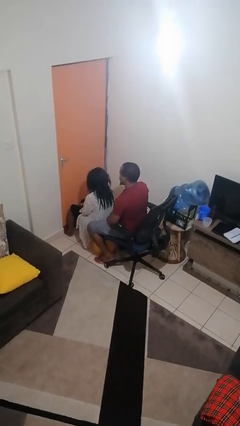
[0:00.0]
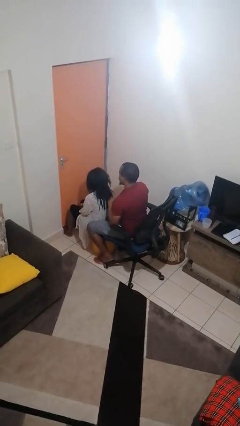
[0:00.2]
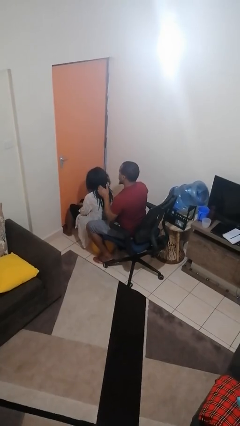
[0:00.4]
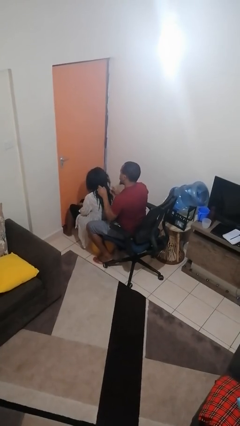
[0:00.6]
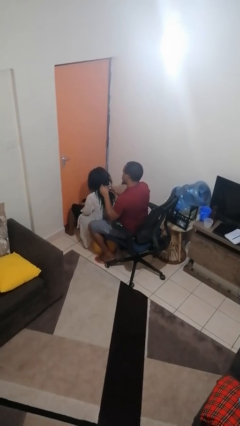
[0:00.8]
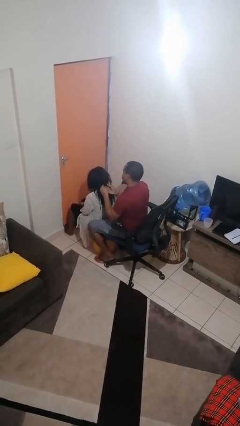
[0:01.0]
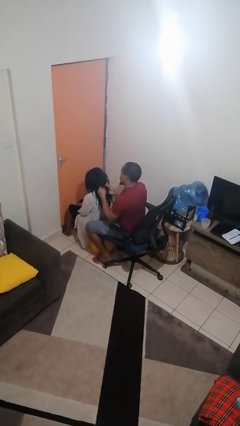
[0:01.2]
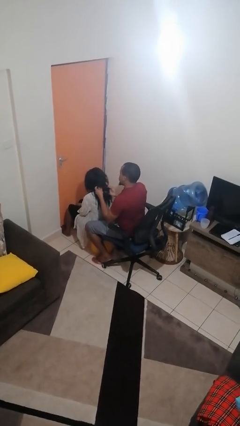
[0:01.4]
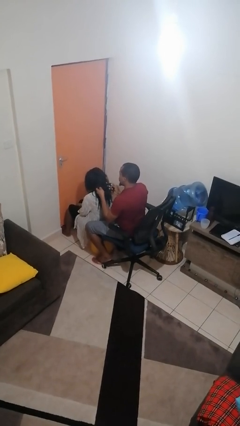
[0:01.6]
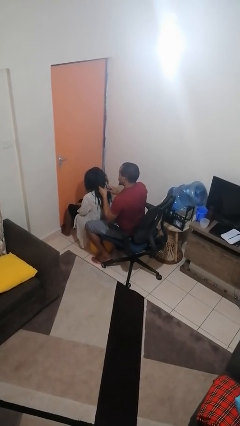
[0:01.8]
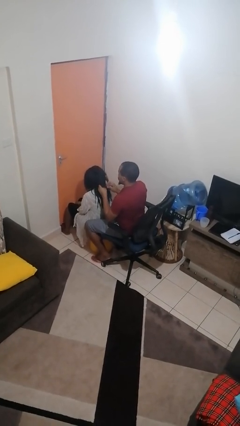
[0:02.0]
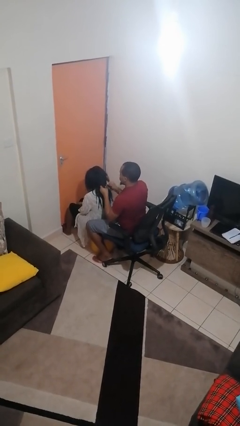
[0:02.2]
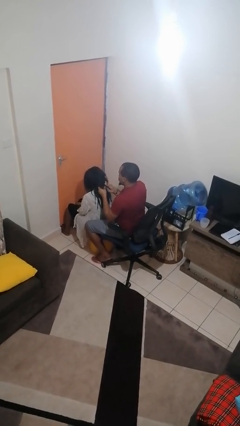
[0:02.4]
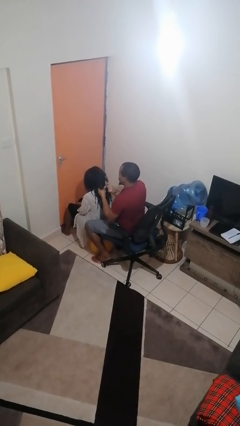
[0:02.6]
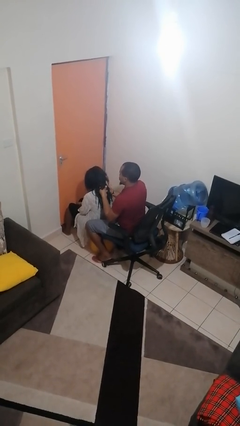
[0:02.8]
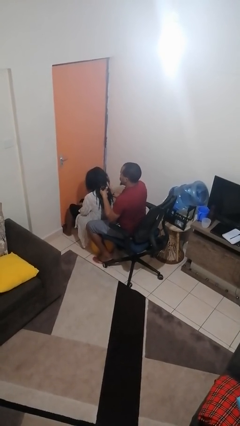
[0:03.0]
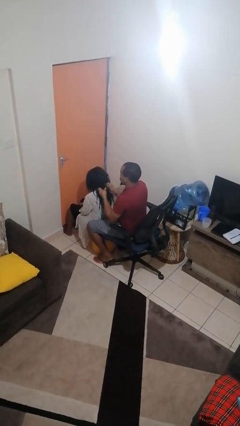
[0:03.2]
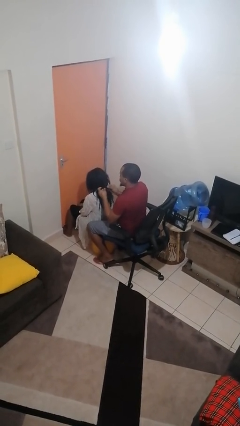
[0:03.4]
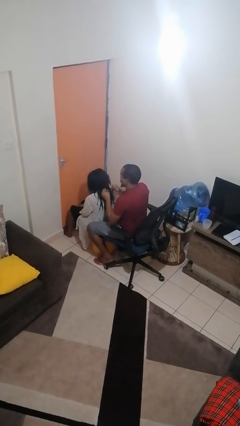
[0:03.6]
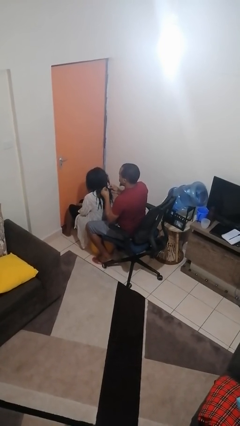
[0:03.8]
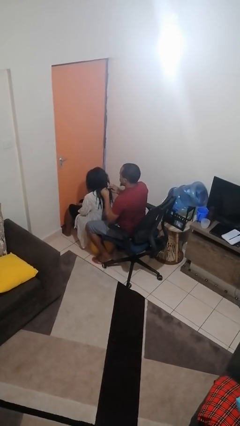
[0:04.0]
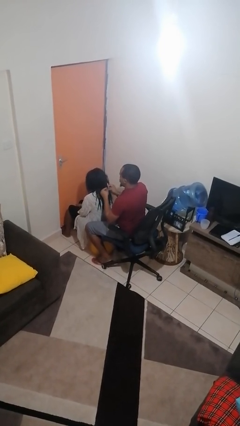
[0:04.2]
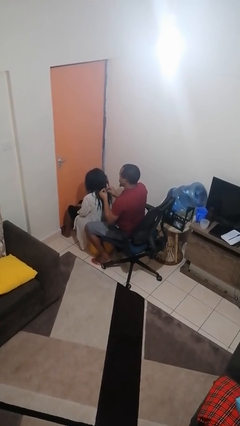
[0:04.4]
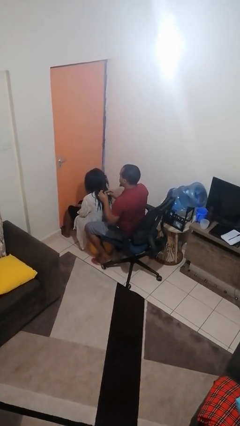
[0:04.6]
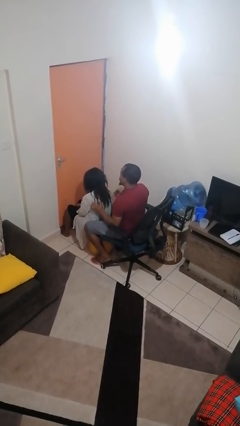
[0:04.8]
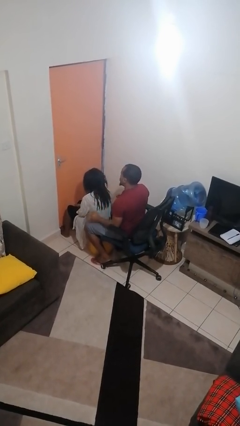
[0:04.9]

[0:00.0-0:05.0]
person braids hair of person

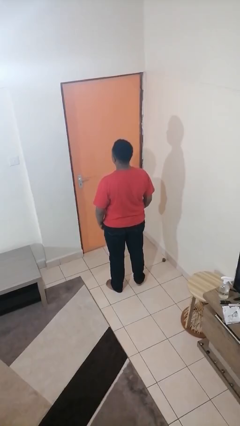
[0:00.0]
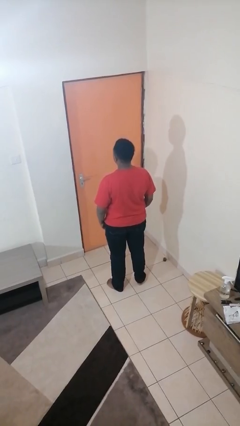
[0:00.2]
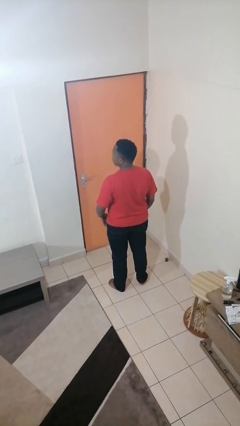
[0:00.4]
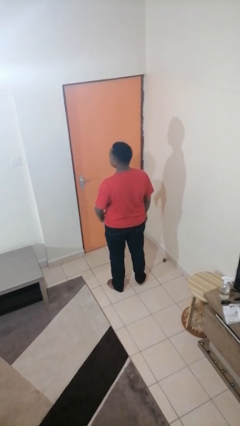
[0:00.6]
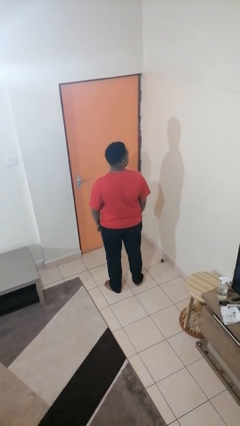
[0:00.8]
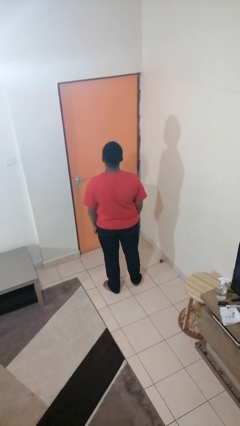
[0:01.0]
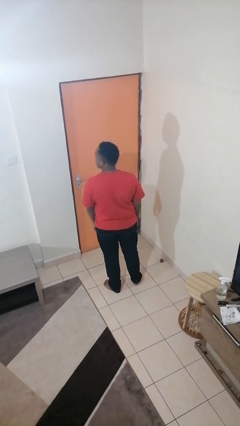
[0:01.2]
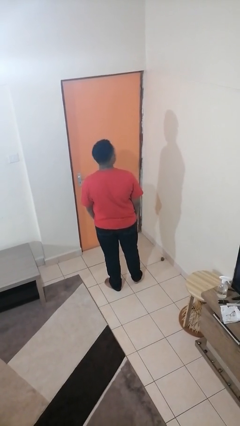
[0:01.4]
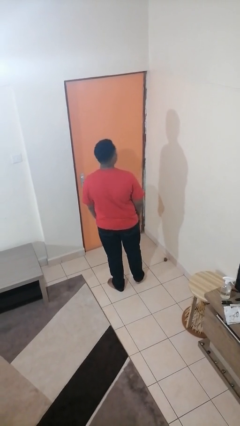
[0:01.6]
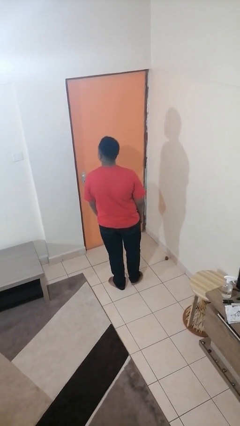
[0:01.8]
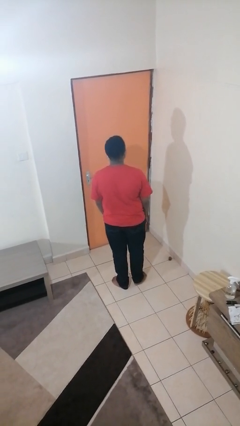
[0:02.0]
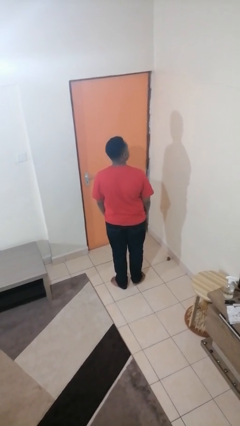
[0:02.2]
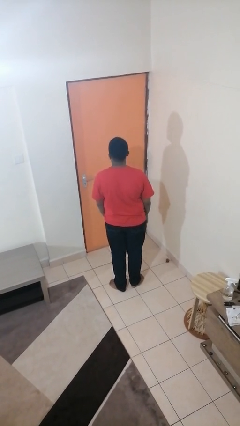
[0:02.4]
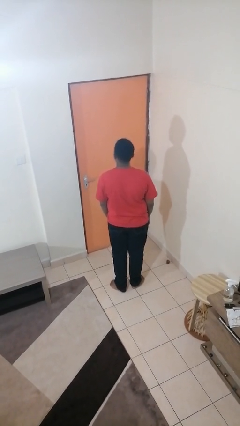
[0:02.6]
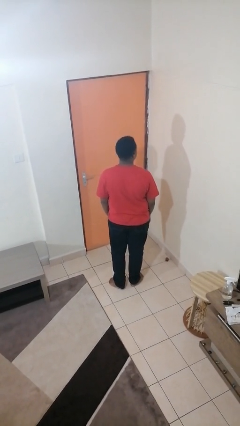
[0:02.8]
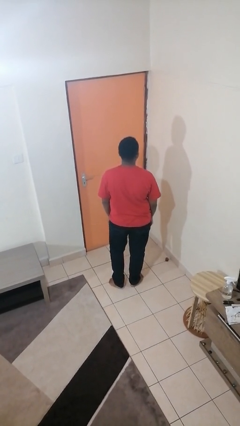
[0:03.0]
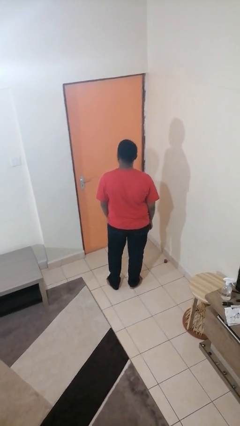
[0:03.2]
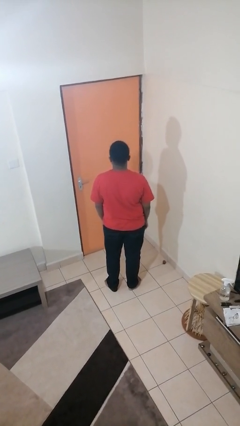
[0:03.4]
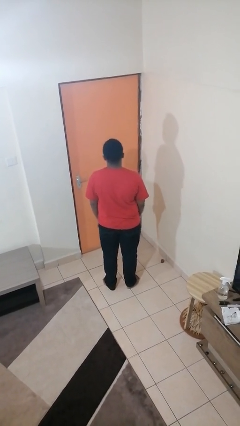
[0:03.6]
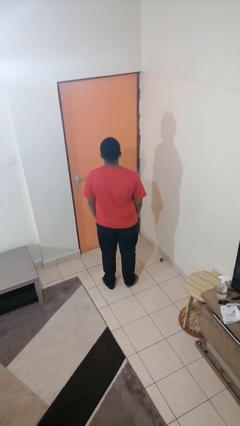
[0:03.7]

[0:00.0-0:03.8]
person shakes head

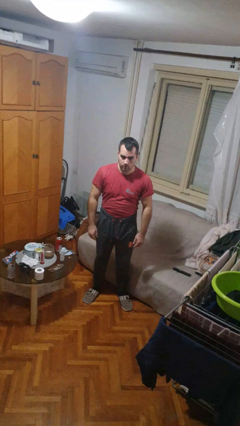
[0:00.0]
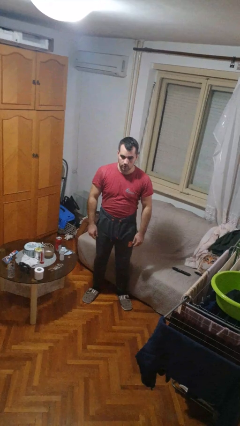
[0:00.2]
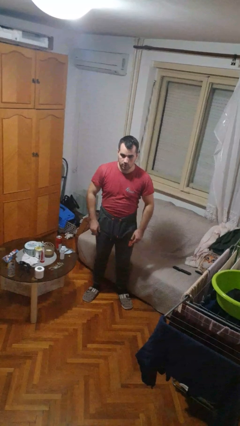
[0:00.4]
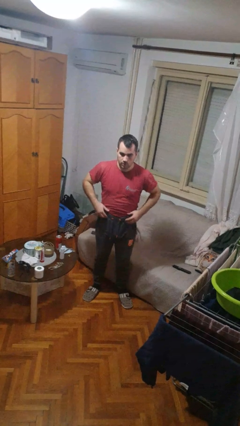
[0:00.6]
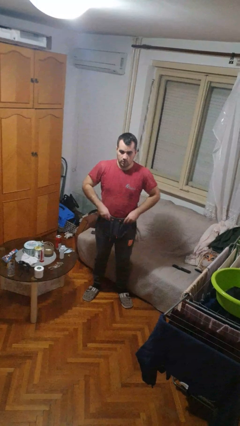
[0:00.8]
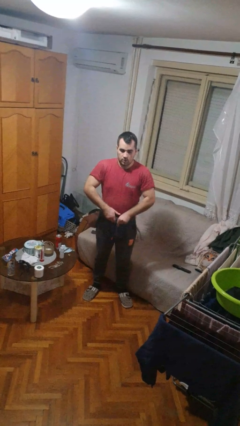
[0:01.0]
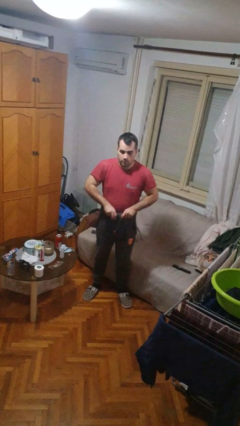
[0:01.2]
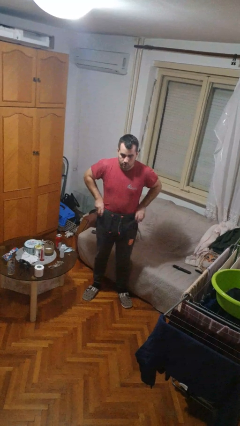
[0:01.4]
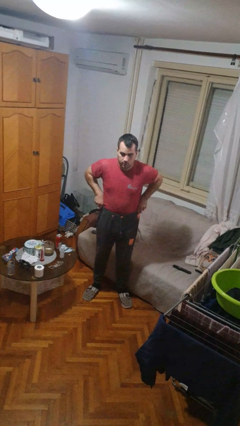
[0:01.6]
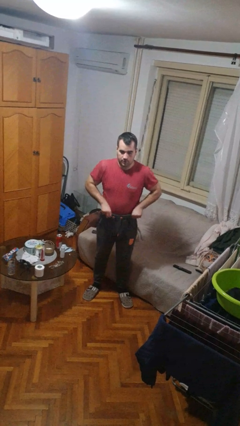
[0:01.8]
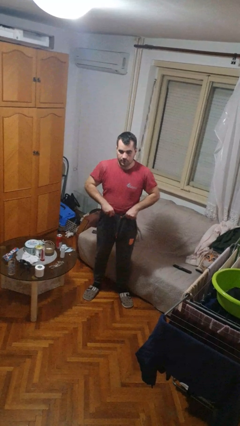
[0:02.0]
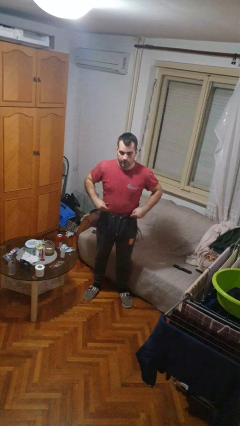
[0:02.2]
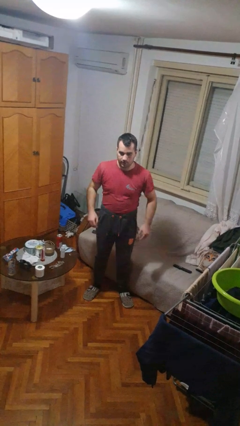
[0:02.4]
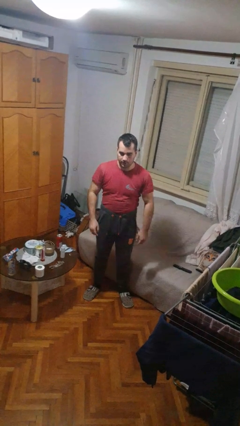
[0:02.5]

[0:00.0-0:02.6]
person hikes up pants

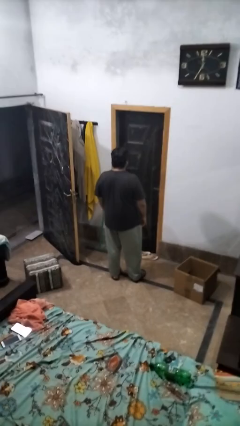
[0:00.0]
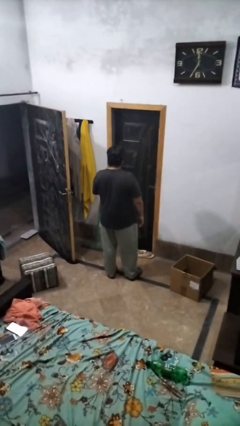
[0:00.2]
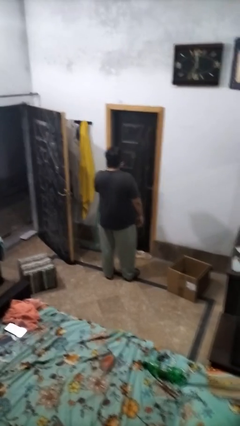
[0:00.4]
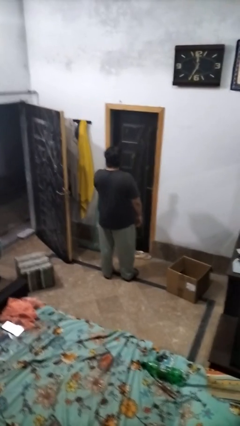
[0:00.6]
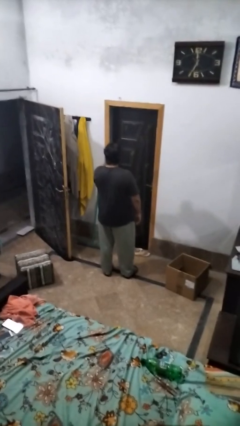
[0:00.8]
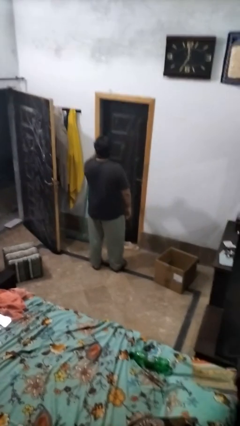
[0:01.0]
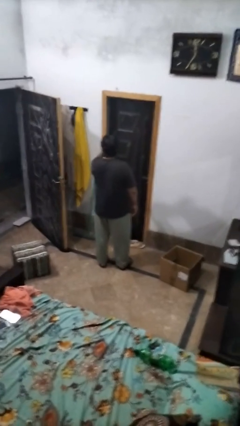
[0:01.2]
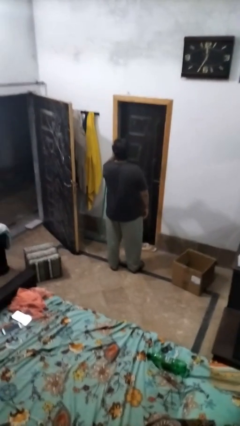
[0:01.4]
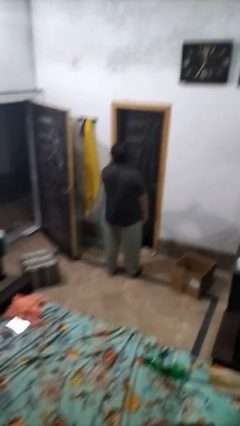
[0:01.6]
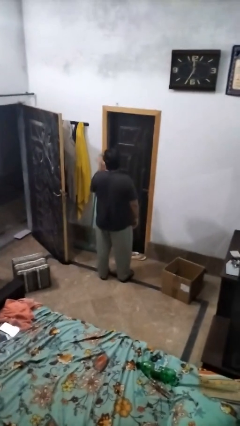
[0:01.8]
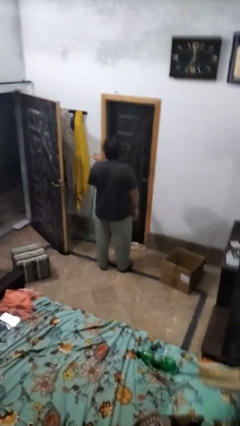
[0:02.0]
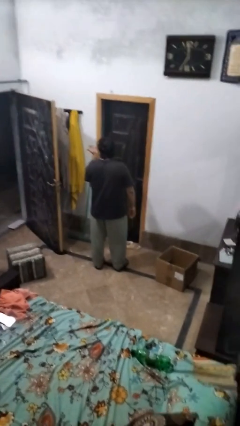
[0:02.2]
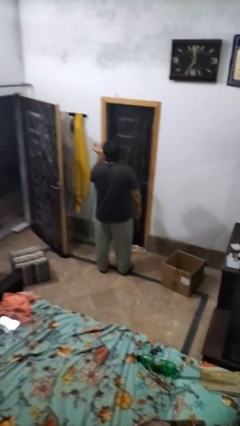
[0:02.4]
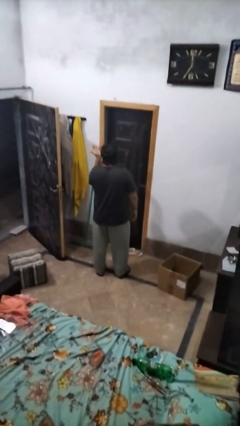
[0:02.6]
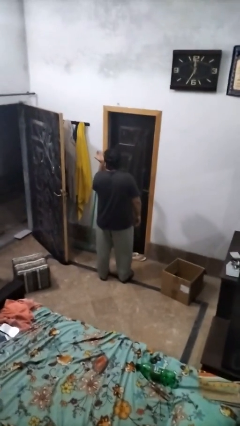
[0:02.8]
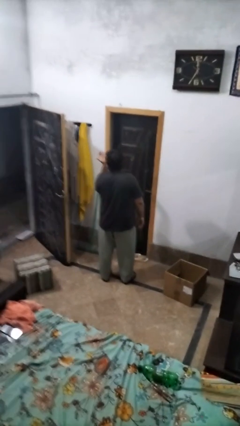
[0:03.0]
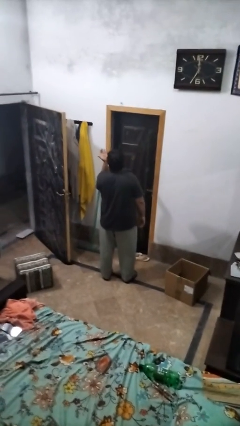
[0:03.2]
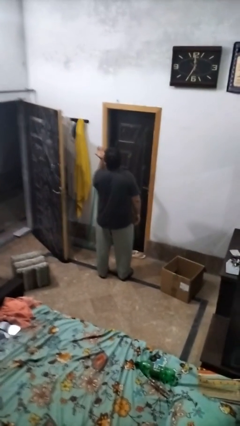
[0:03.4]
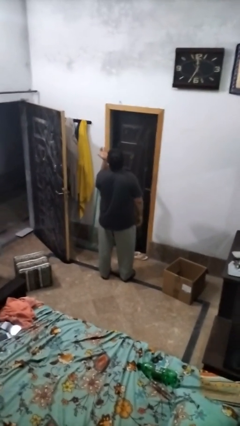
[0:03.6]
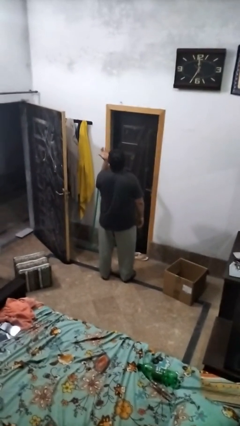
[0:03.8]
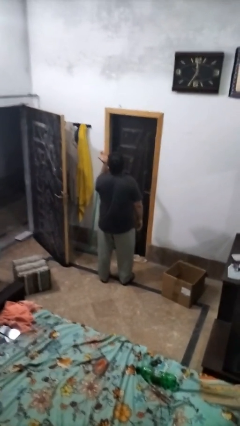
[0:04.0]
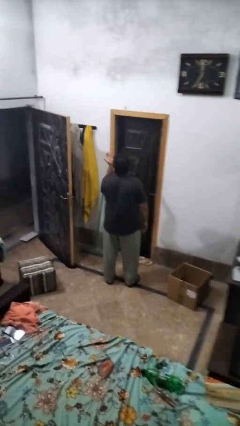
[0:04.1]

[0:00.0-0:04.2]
person gestures blow kiss

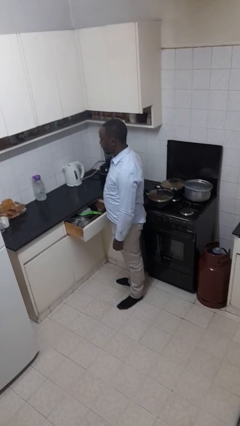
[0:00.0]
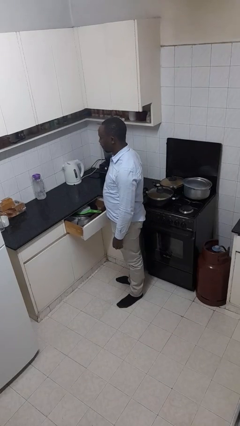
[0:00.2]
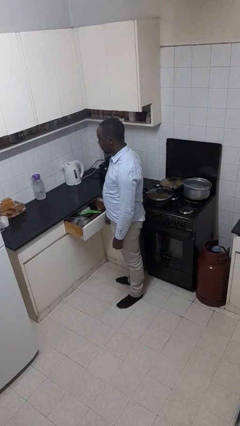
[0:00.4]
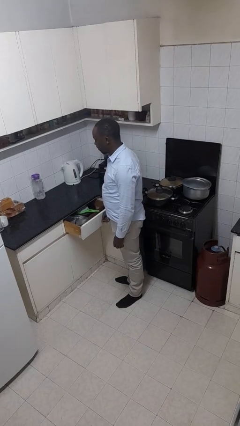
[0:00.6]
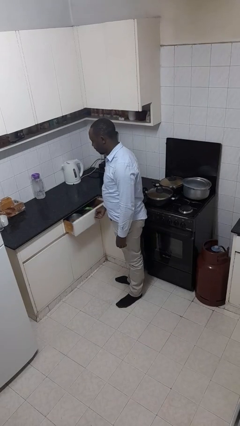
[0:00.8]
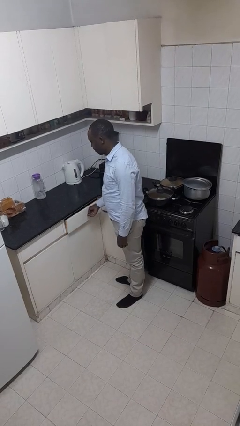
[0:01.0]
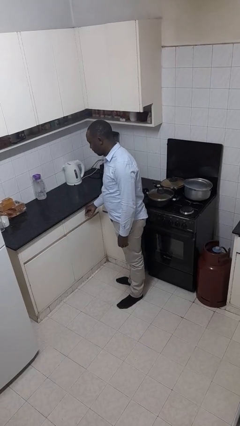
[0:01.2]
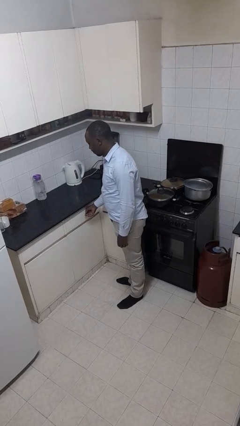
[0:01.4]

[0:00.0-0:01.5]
person closes kitchen drawer

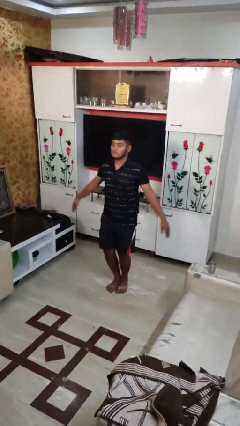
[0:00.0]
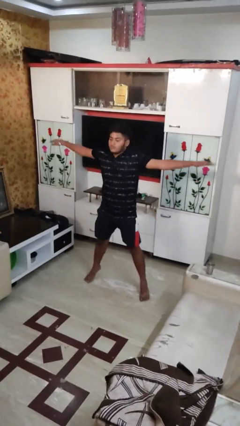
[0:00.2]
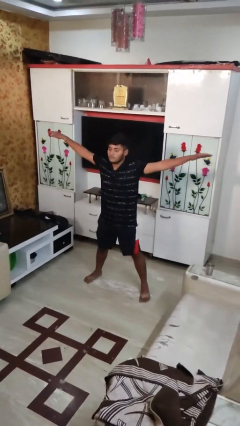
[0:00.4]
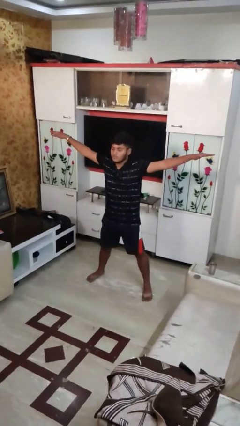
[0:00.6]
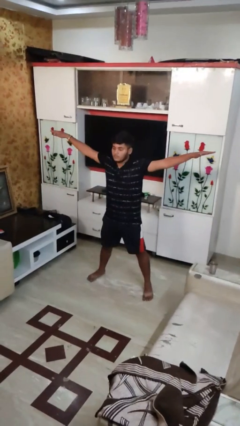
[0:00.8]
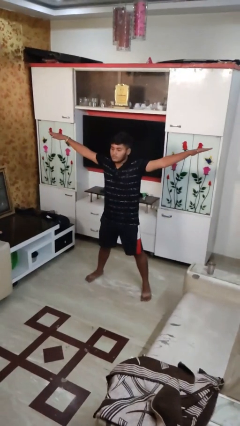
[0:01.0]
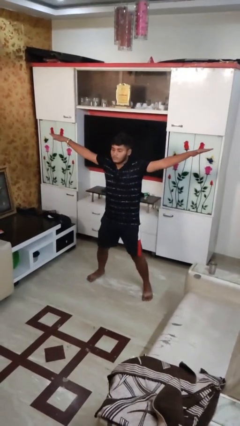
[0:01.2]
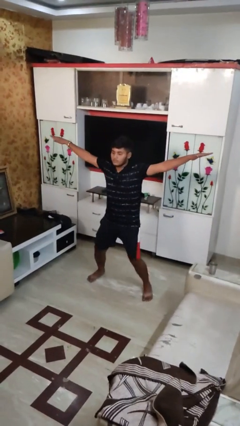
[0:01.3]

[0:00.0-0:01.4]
person exercises with jumping jacks
